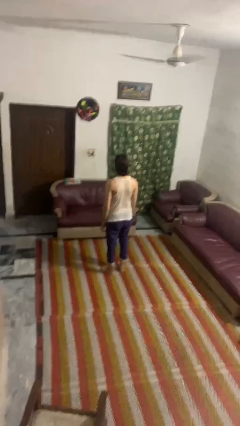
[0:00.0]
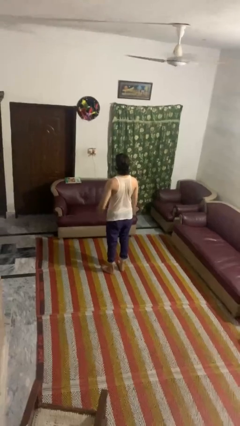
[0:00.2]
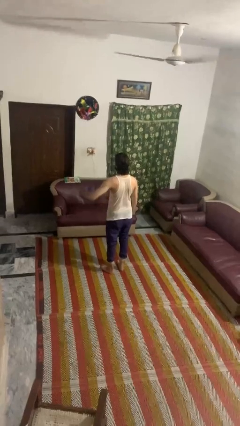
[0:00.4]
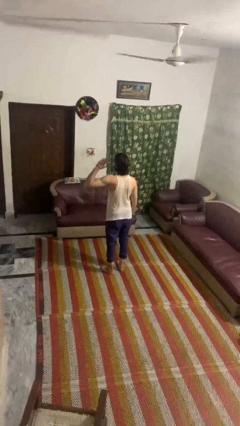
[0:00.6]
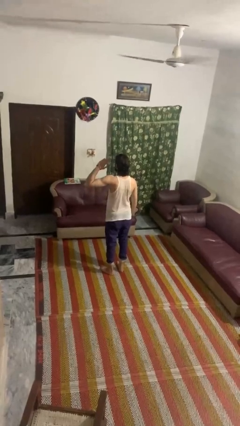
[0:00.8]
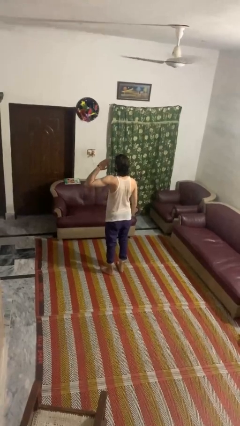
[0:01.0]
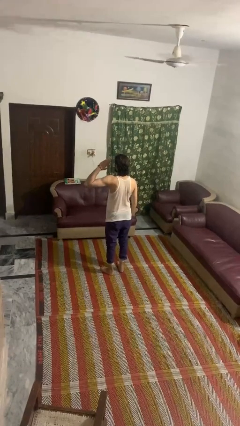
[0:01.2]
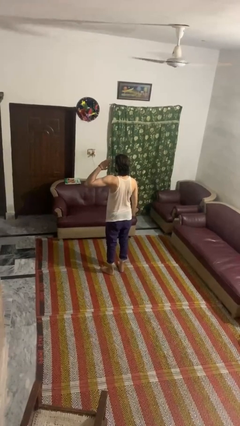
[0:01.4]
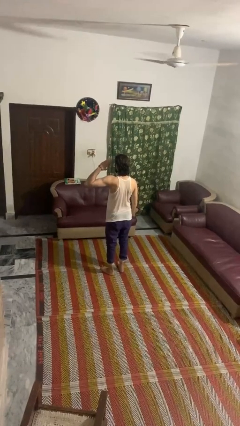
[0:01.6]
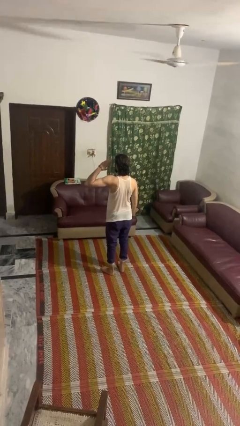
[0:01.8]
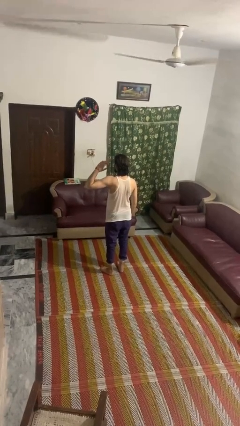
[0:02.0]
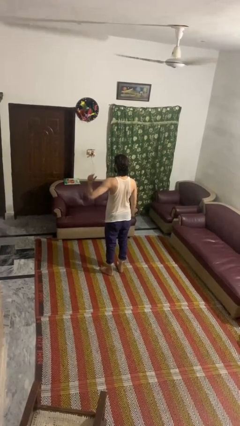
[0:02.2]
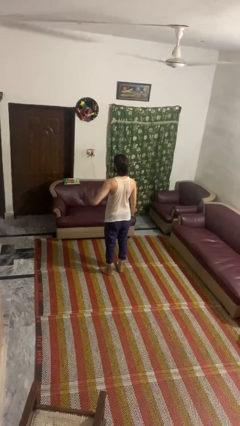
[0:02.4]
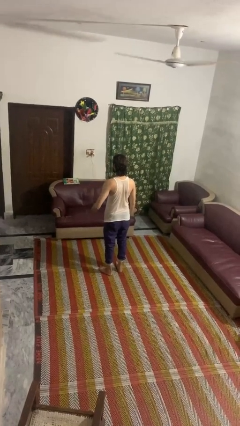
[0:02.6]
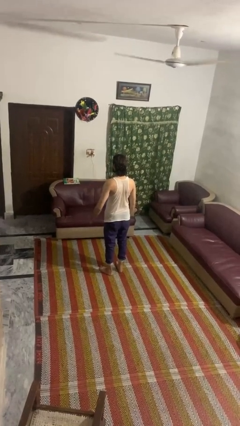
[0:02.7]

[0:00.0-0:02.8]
person salutes

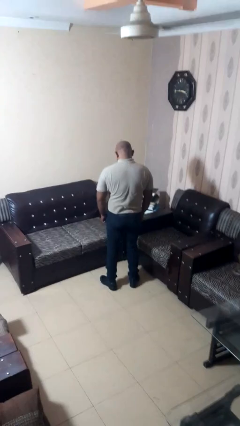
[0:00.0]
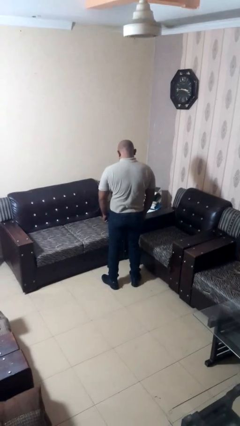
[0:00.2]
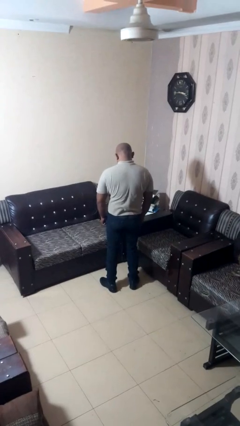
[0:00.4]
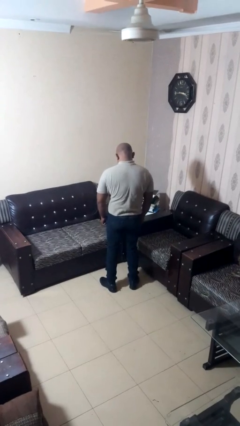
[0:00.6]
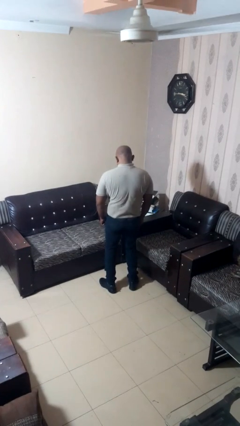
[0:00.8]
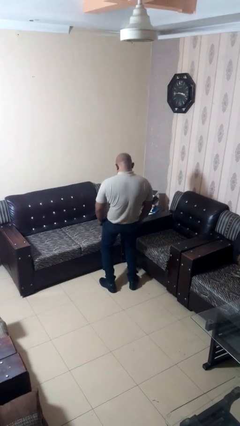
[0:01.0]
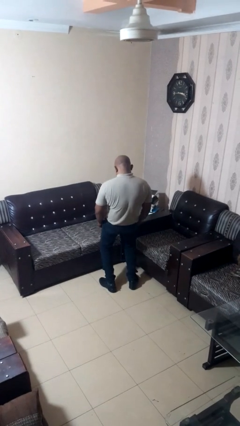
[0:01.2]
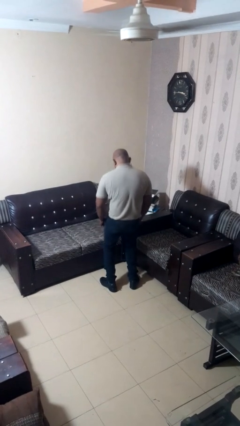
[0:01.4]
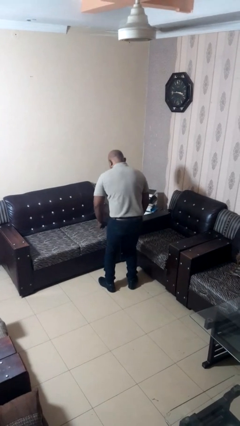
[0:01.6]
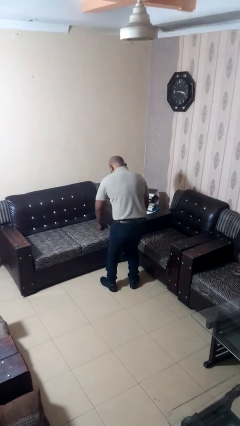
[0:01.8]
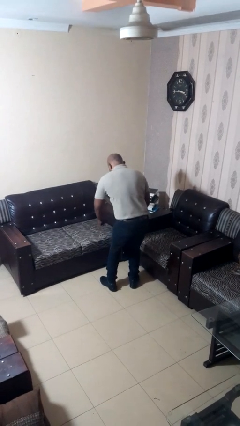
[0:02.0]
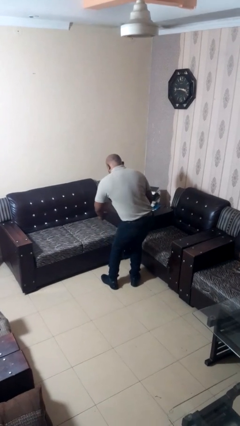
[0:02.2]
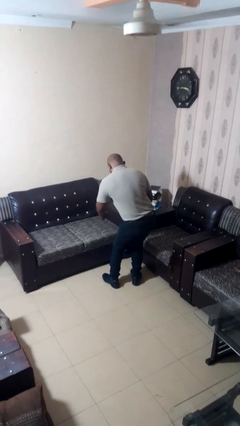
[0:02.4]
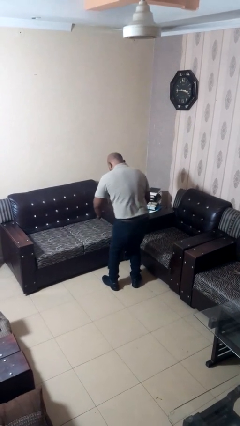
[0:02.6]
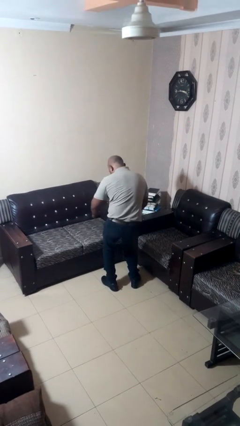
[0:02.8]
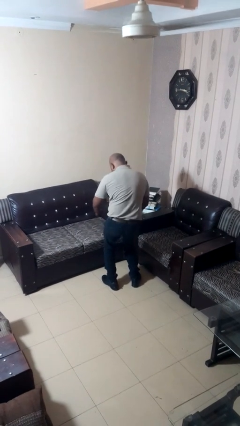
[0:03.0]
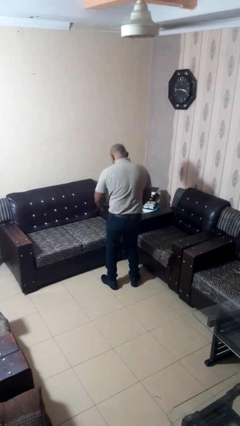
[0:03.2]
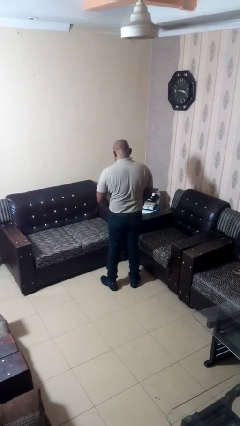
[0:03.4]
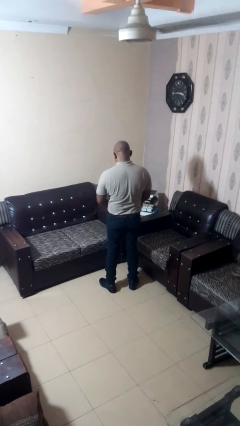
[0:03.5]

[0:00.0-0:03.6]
person wiggles hips

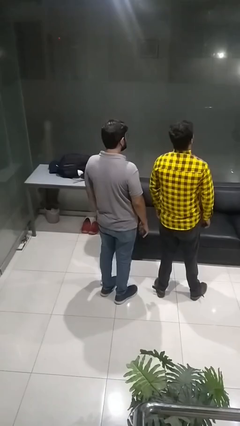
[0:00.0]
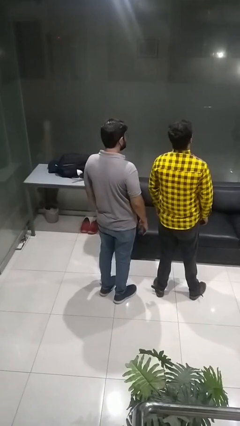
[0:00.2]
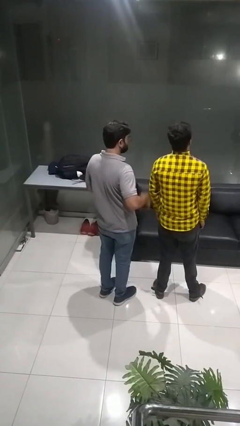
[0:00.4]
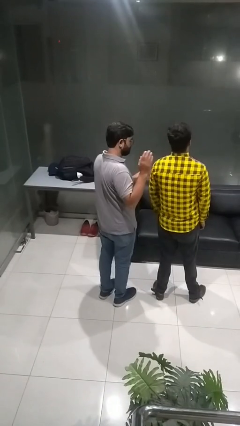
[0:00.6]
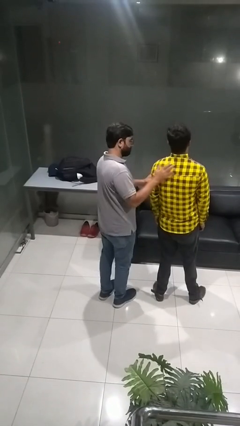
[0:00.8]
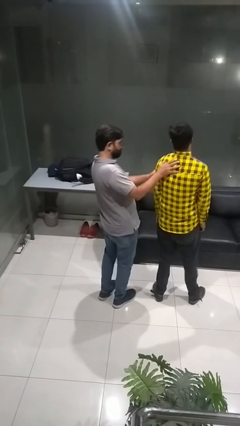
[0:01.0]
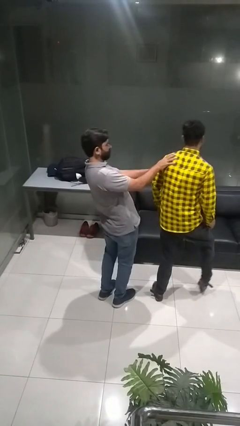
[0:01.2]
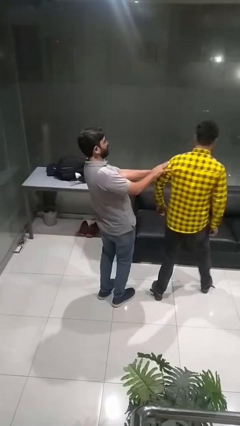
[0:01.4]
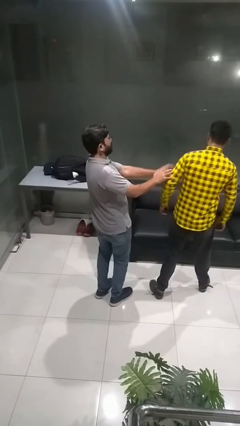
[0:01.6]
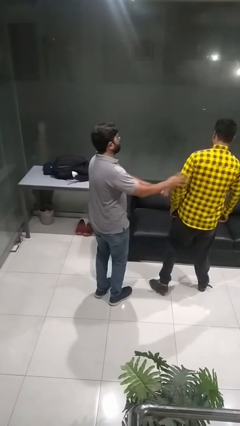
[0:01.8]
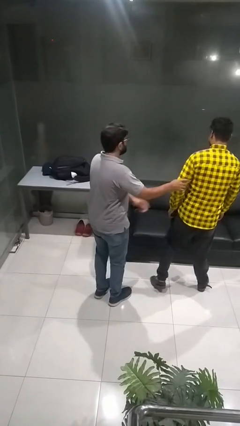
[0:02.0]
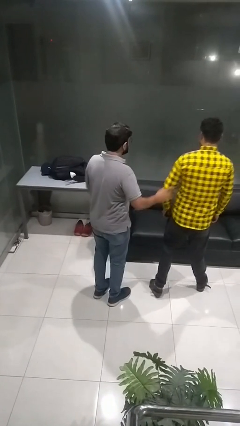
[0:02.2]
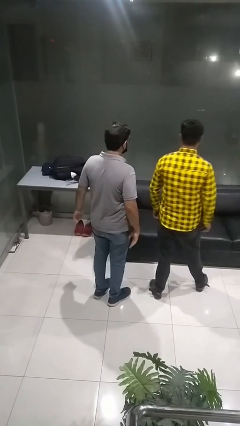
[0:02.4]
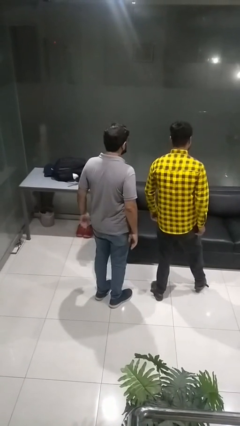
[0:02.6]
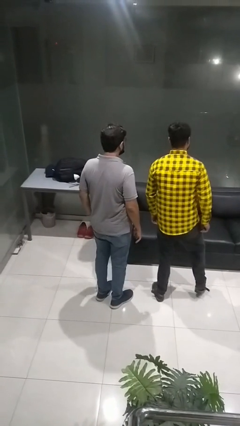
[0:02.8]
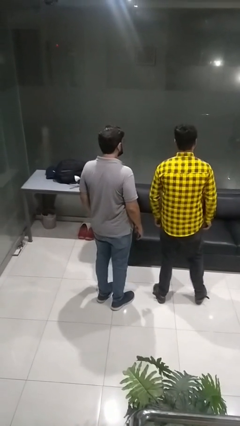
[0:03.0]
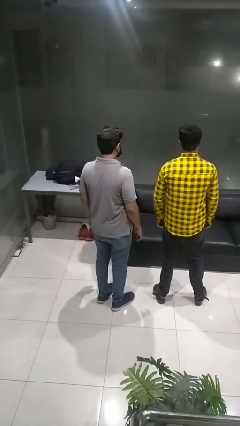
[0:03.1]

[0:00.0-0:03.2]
person shoves person

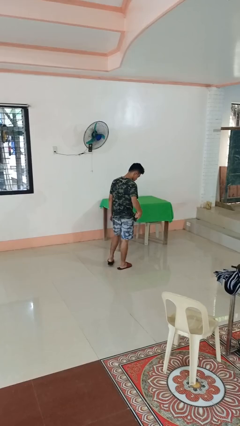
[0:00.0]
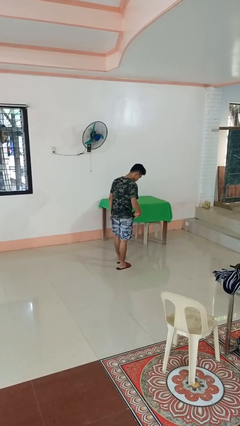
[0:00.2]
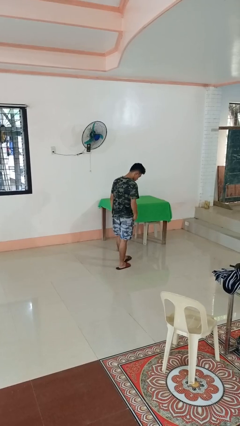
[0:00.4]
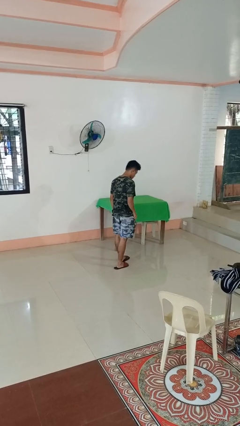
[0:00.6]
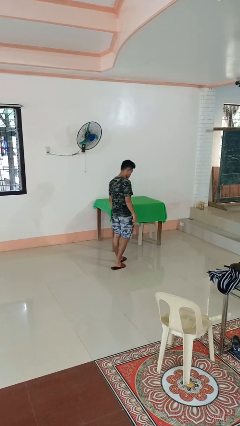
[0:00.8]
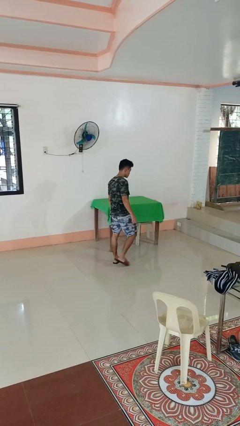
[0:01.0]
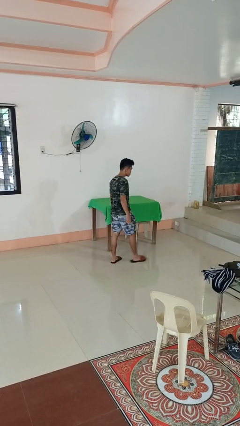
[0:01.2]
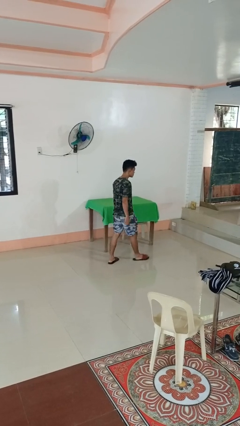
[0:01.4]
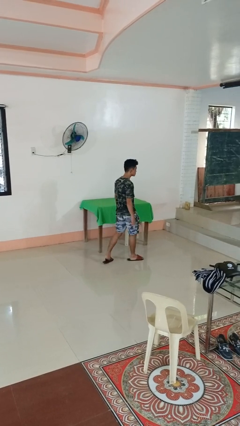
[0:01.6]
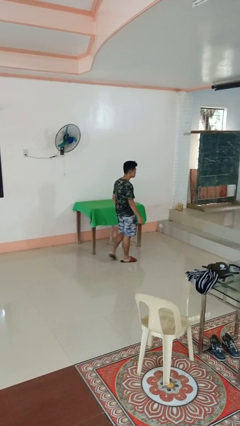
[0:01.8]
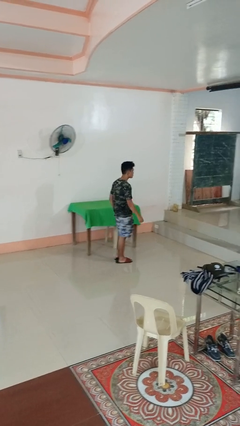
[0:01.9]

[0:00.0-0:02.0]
person puts phone into pocket

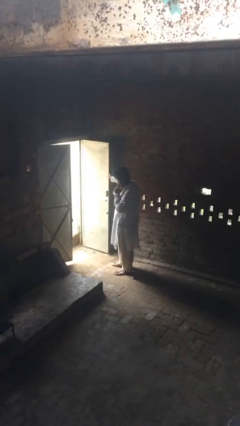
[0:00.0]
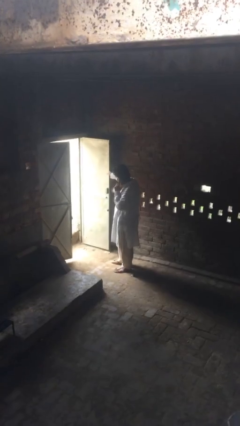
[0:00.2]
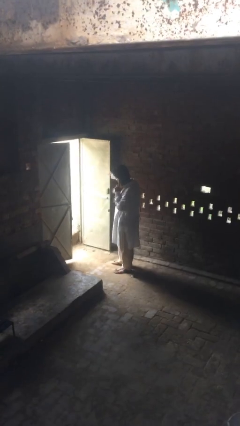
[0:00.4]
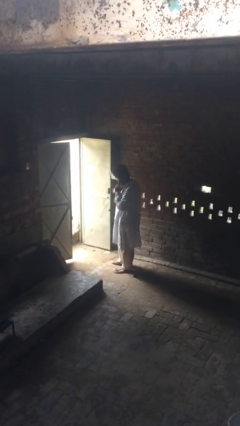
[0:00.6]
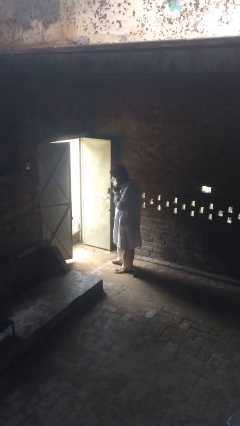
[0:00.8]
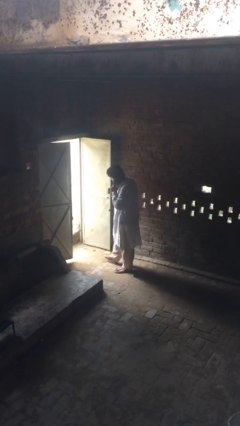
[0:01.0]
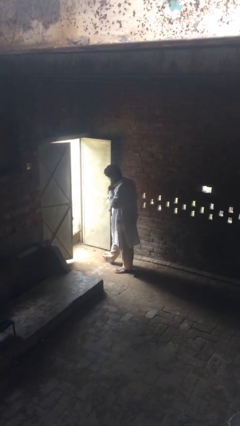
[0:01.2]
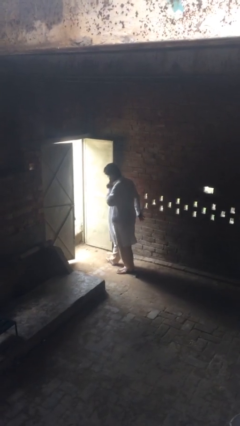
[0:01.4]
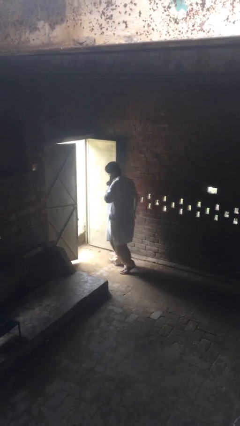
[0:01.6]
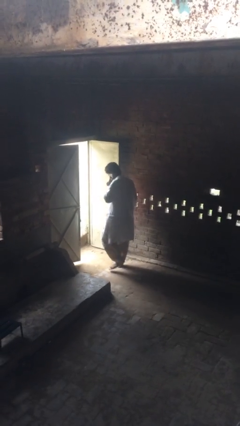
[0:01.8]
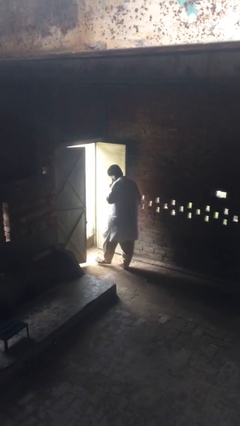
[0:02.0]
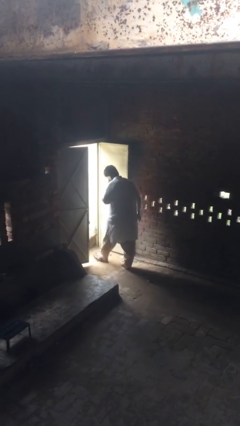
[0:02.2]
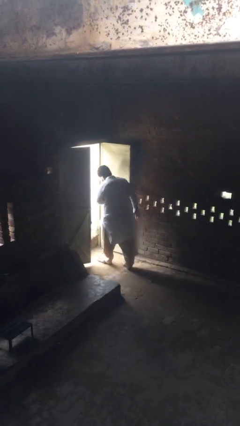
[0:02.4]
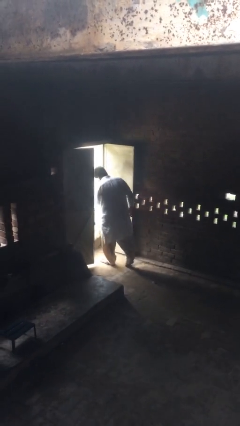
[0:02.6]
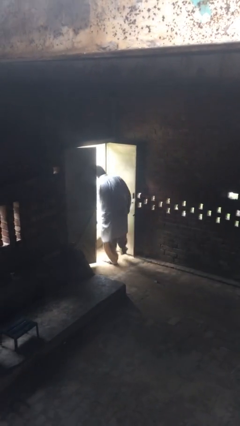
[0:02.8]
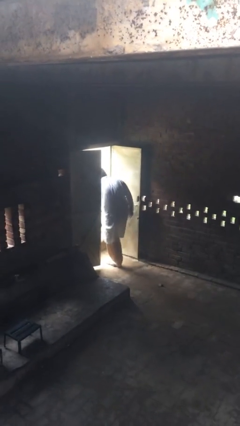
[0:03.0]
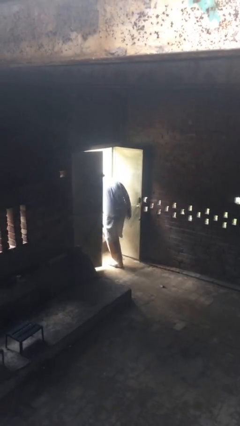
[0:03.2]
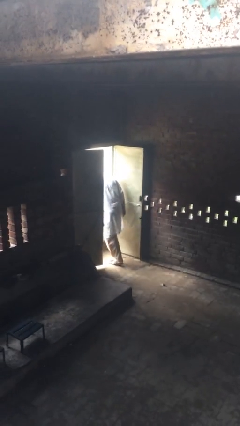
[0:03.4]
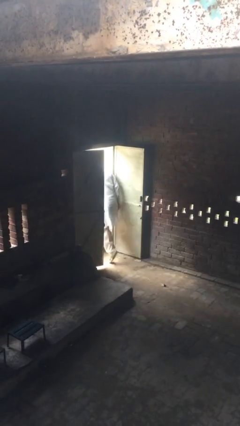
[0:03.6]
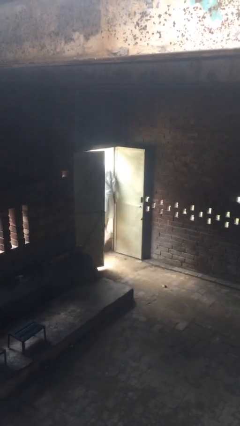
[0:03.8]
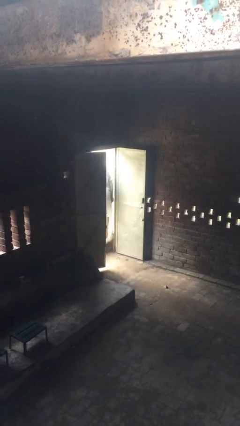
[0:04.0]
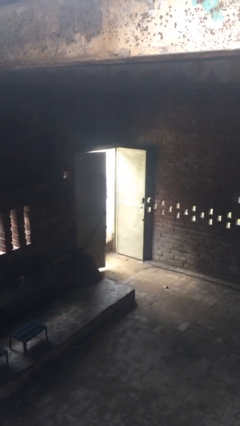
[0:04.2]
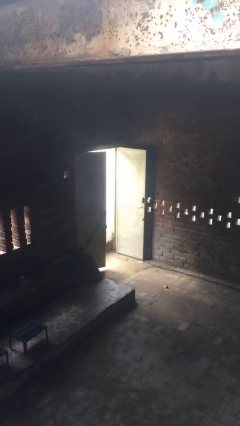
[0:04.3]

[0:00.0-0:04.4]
person exits scene through structure

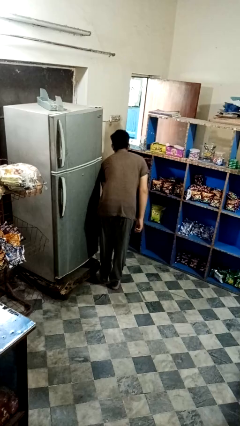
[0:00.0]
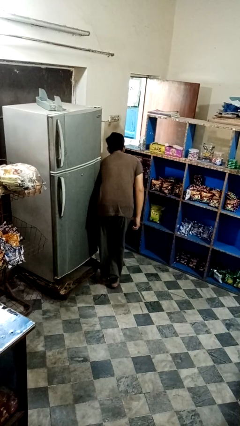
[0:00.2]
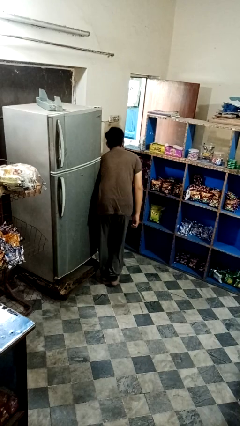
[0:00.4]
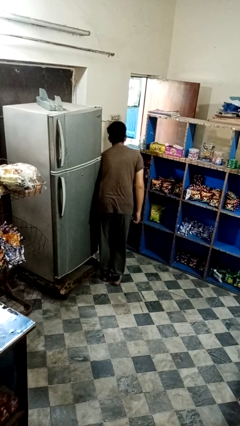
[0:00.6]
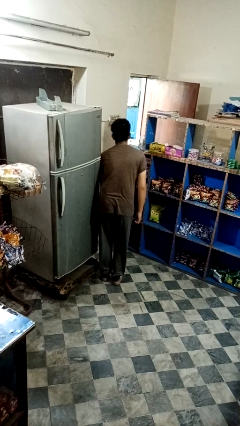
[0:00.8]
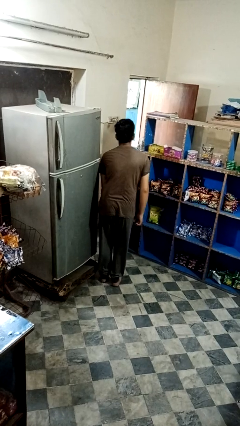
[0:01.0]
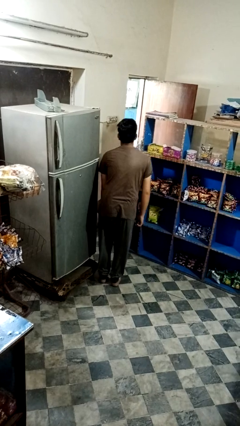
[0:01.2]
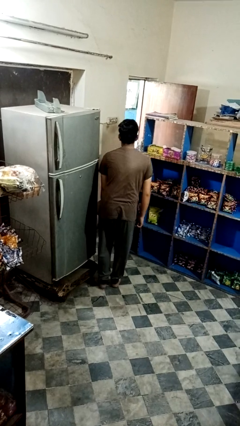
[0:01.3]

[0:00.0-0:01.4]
person stubs toe
